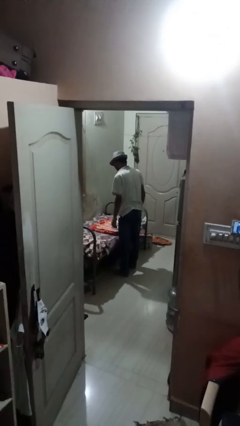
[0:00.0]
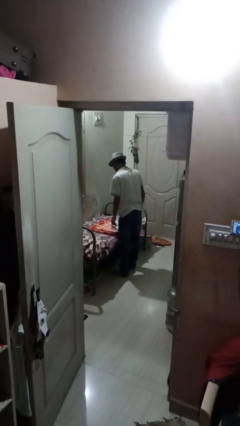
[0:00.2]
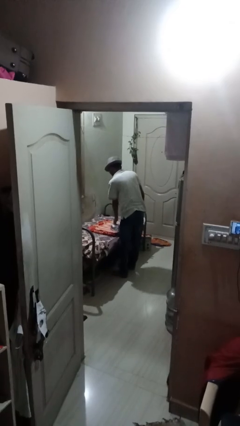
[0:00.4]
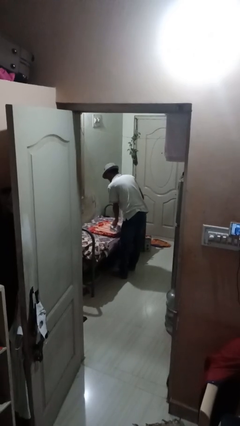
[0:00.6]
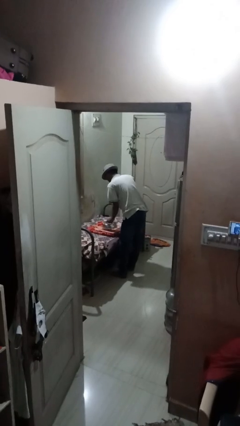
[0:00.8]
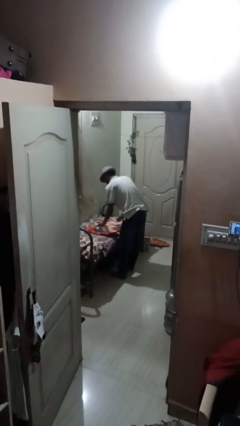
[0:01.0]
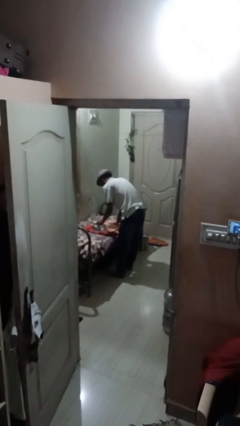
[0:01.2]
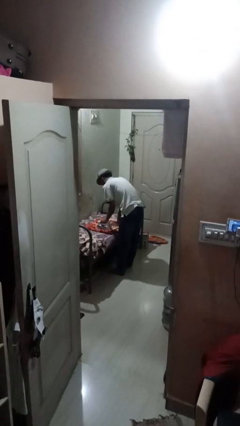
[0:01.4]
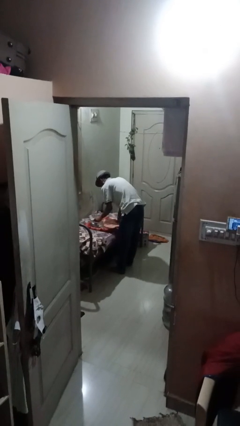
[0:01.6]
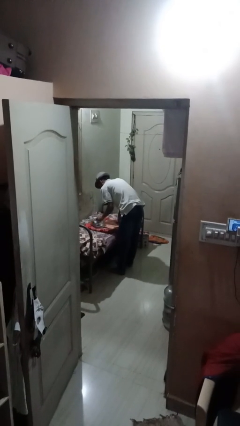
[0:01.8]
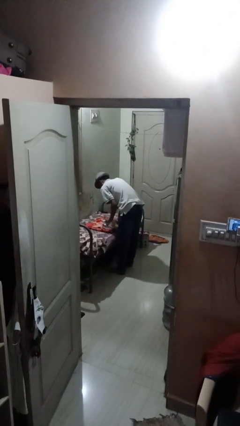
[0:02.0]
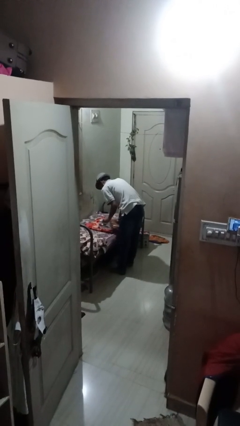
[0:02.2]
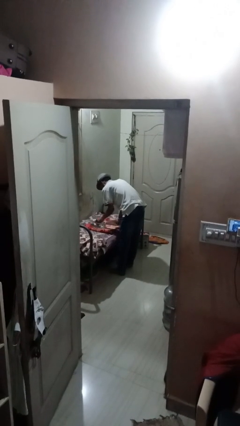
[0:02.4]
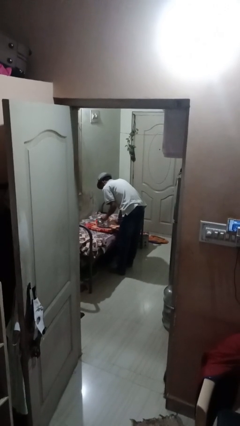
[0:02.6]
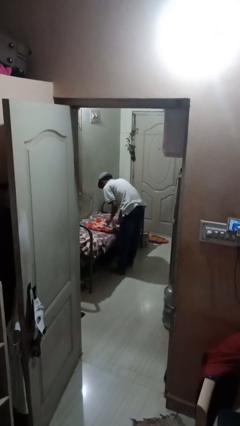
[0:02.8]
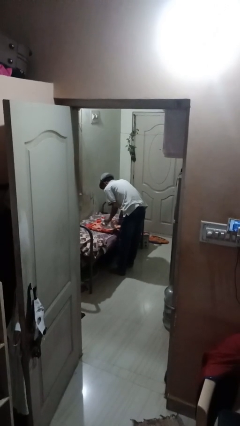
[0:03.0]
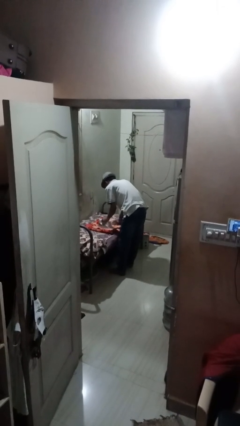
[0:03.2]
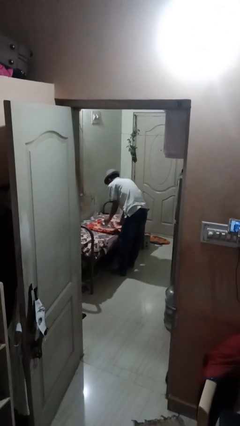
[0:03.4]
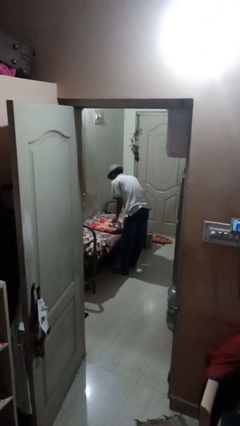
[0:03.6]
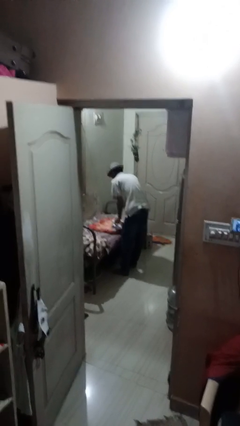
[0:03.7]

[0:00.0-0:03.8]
person irons clothes

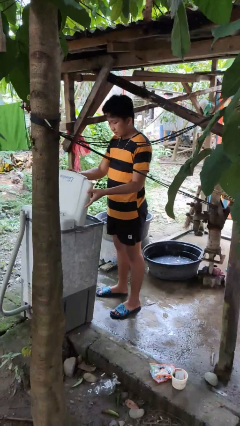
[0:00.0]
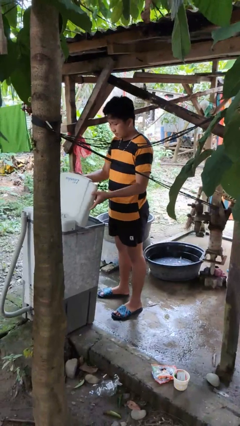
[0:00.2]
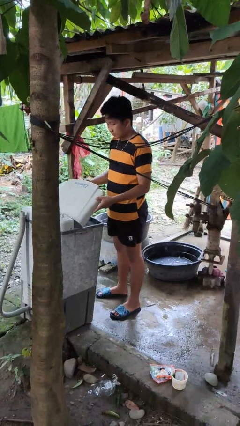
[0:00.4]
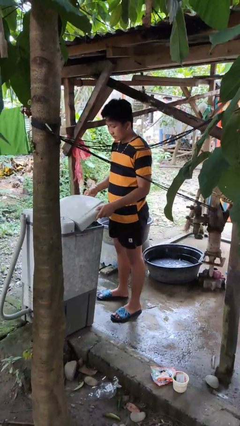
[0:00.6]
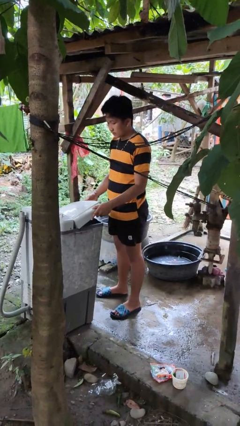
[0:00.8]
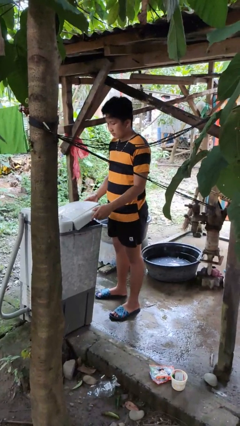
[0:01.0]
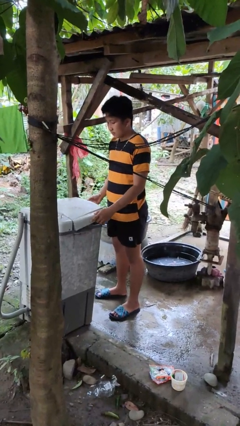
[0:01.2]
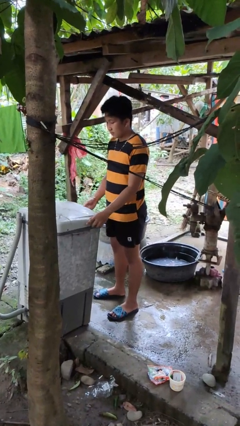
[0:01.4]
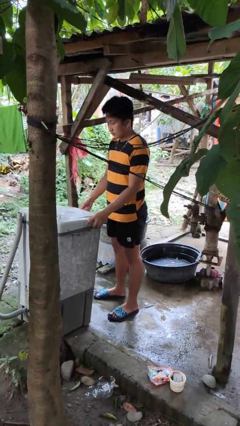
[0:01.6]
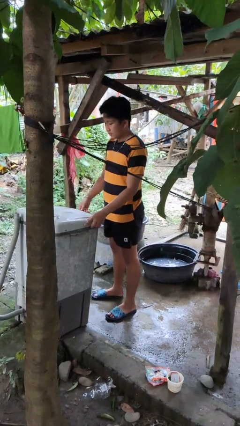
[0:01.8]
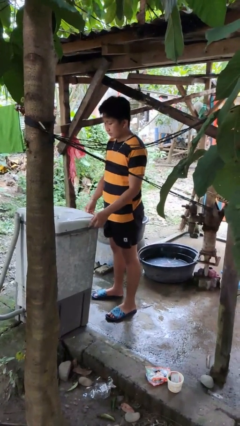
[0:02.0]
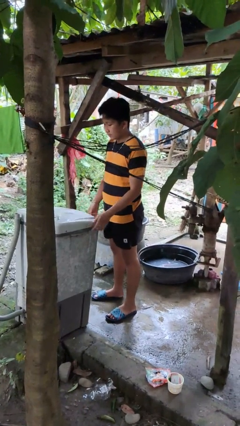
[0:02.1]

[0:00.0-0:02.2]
person closes clothes washer

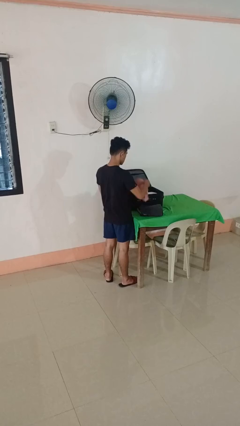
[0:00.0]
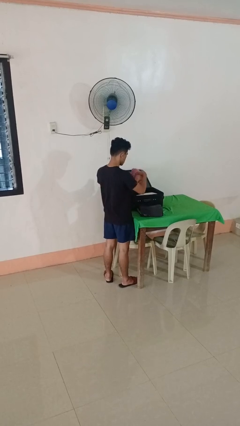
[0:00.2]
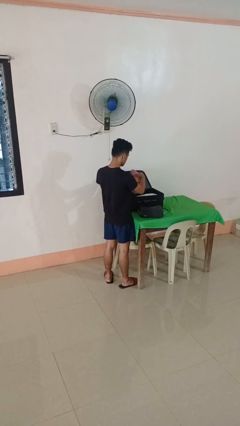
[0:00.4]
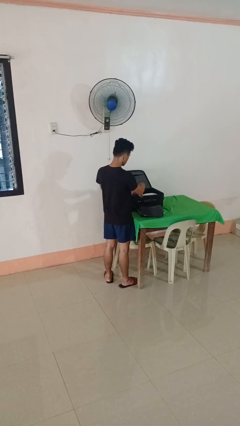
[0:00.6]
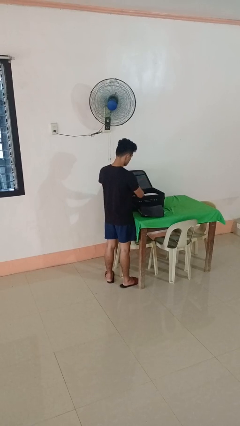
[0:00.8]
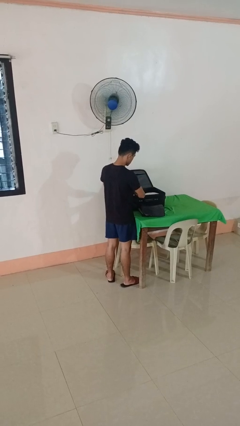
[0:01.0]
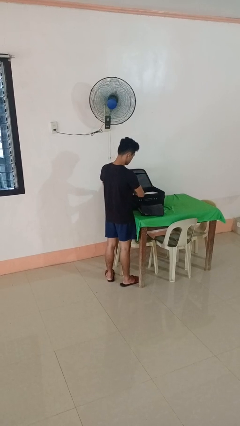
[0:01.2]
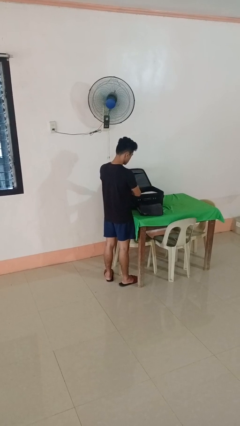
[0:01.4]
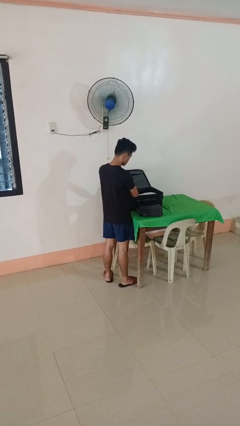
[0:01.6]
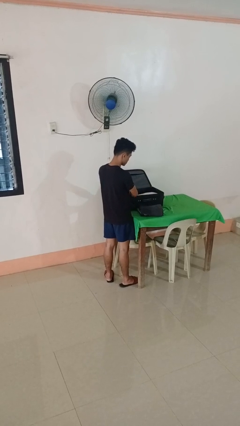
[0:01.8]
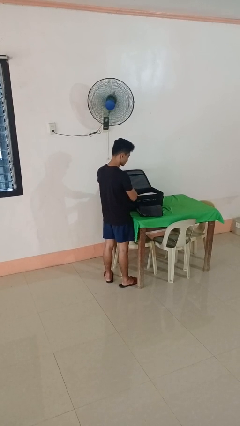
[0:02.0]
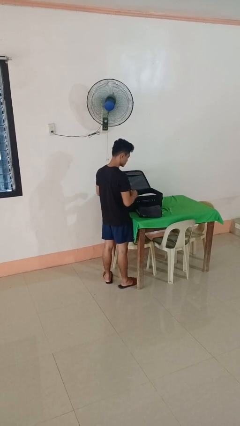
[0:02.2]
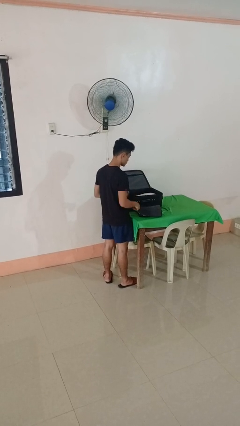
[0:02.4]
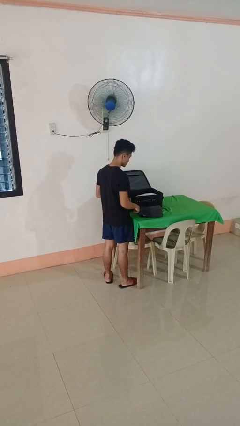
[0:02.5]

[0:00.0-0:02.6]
person loads clothes into suitcase

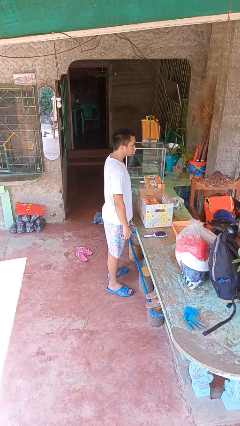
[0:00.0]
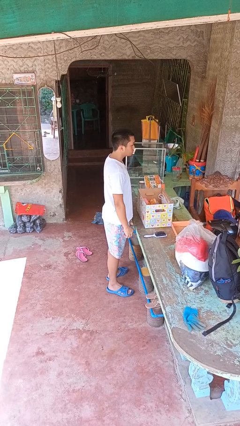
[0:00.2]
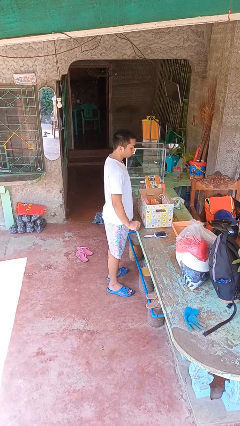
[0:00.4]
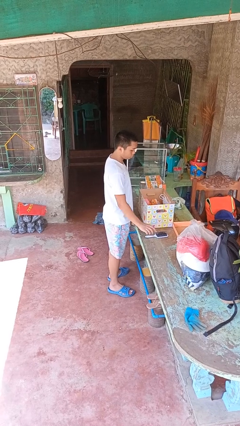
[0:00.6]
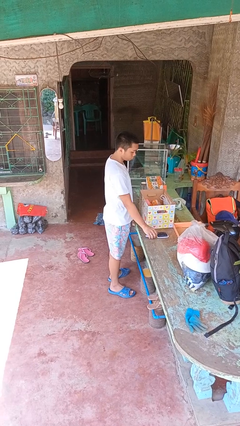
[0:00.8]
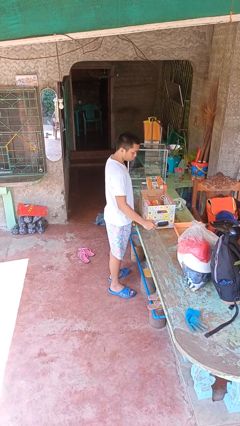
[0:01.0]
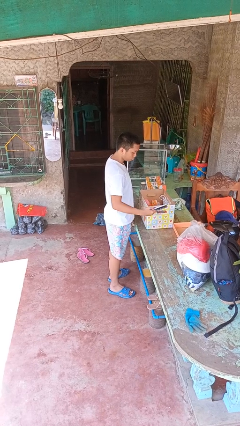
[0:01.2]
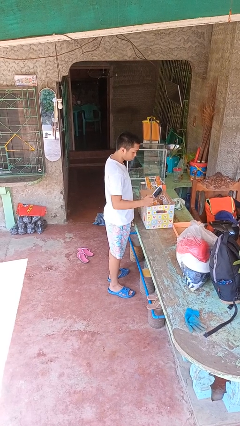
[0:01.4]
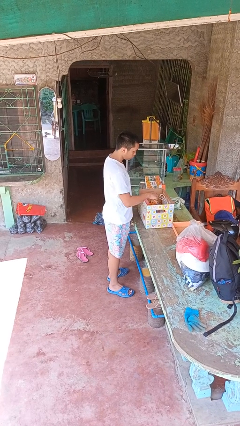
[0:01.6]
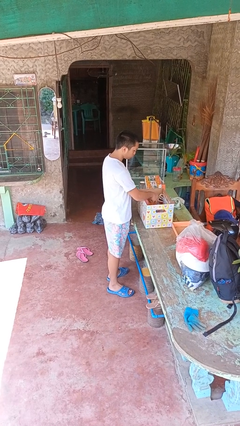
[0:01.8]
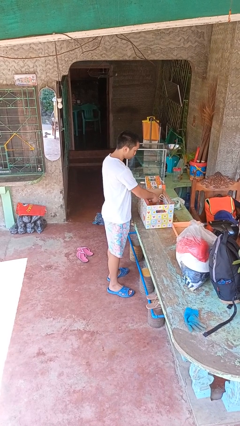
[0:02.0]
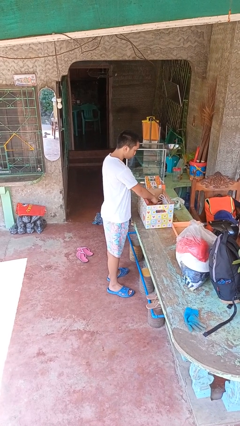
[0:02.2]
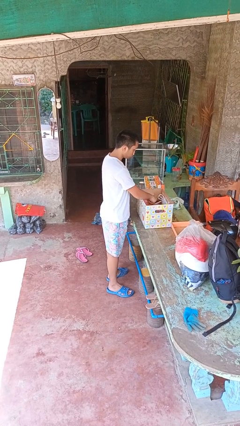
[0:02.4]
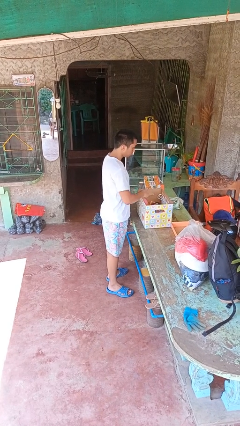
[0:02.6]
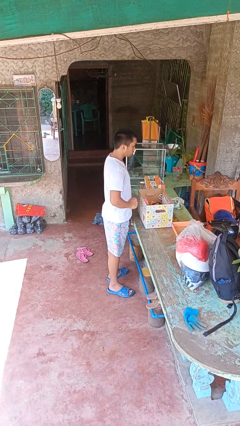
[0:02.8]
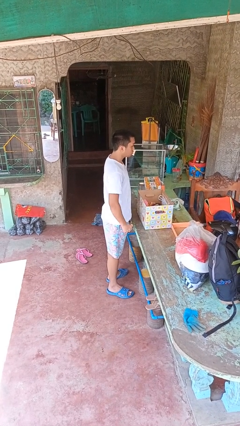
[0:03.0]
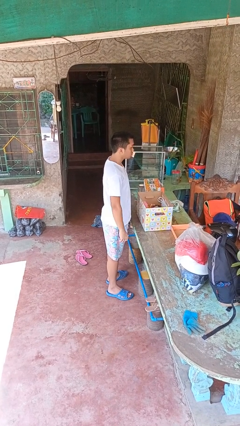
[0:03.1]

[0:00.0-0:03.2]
person puts object into box

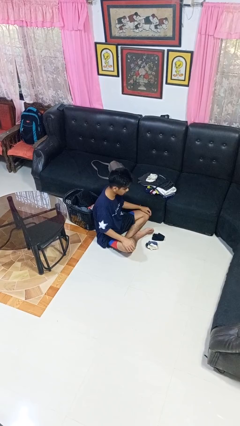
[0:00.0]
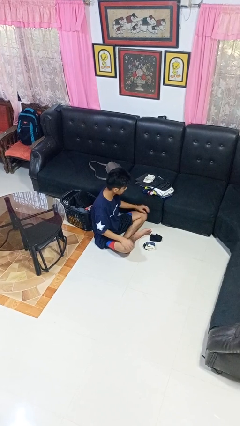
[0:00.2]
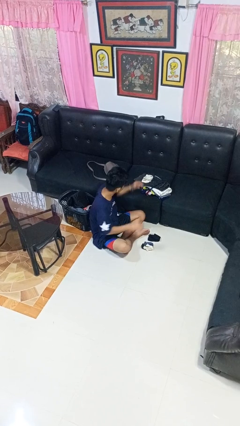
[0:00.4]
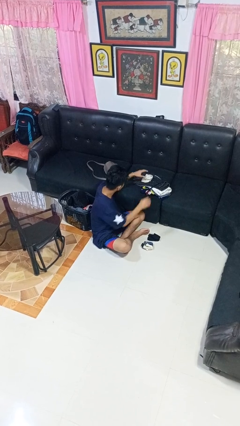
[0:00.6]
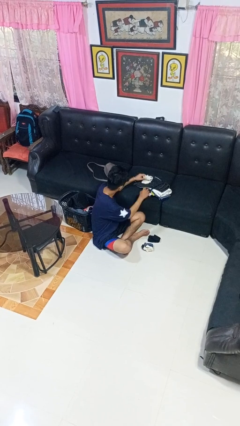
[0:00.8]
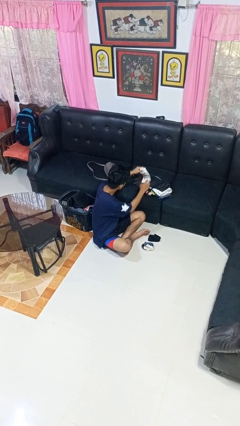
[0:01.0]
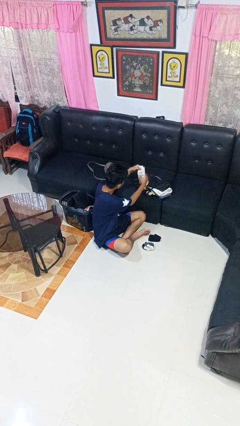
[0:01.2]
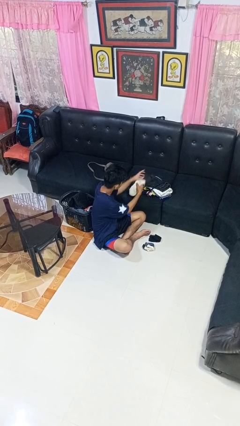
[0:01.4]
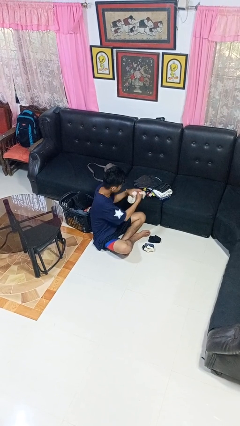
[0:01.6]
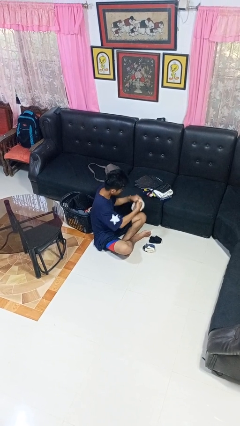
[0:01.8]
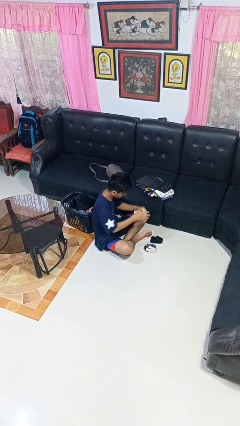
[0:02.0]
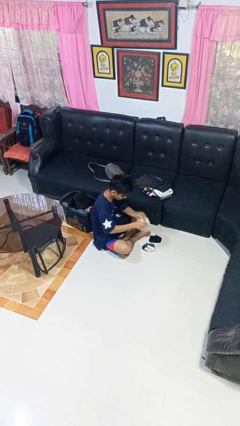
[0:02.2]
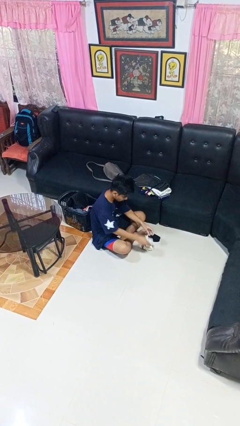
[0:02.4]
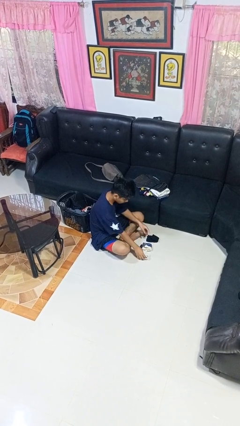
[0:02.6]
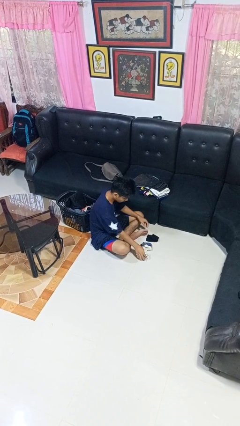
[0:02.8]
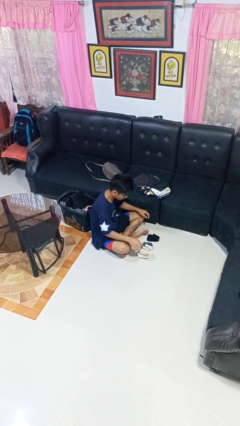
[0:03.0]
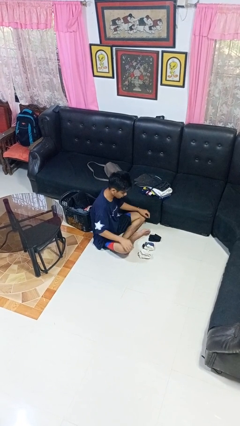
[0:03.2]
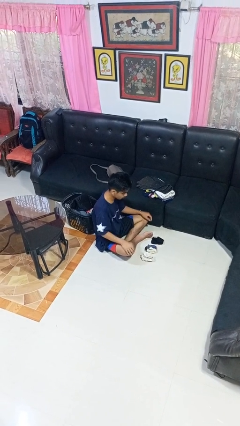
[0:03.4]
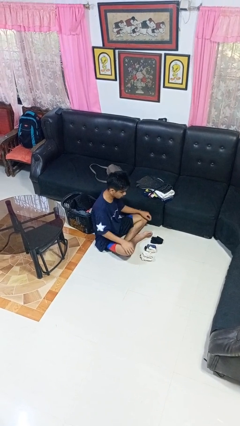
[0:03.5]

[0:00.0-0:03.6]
person folds socks

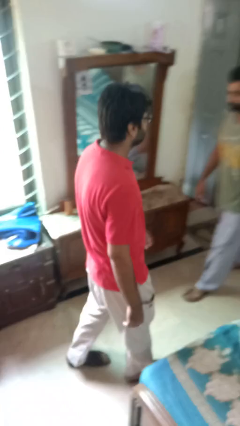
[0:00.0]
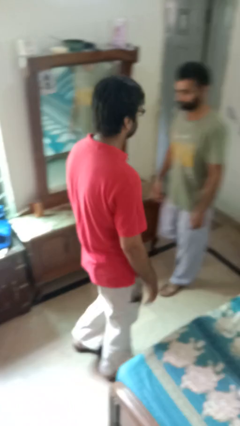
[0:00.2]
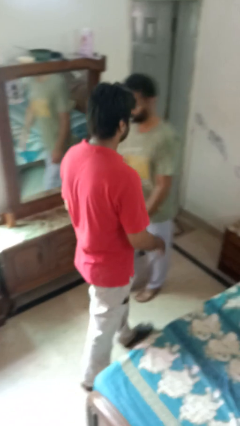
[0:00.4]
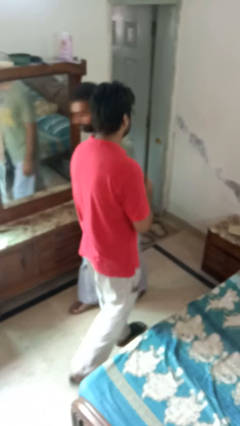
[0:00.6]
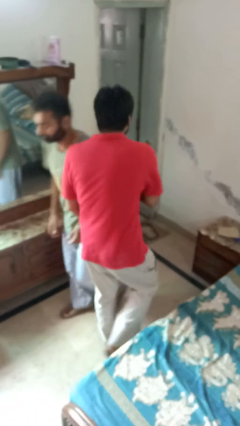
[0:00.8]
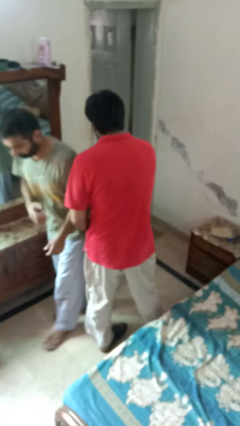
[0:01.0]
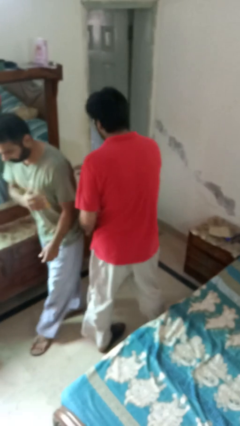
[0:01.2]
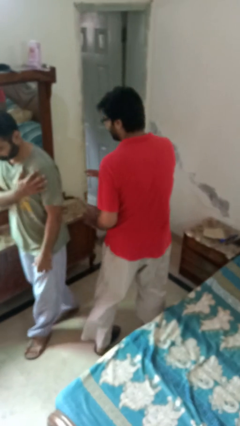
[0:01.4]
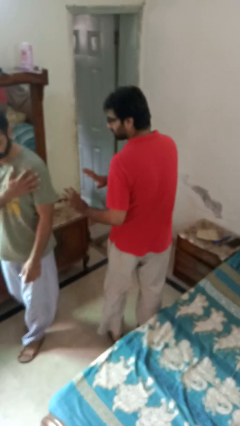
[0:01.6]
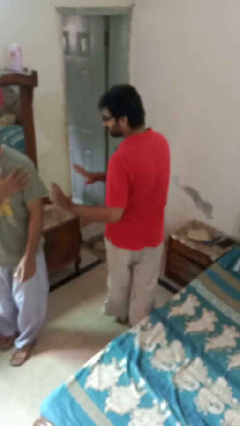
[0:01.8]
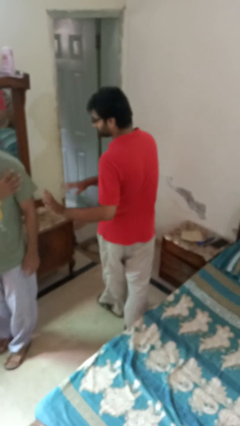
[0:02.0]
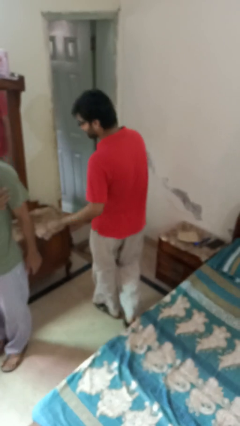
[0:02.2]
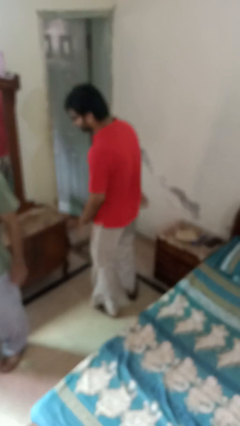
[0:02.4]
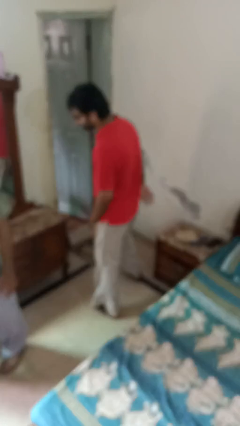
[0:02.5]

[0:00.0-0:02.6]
person bumps into person
